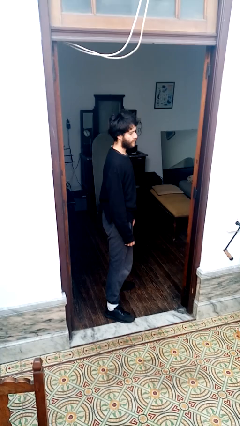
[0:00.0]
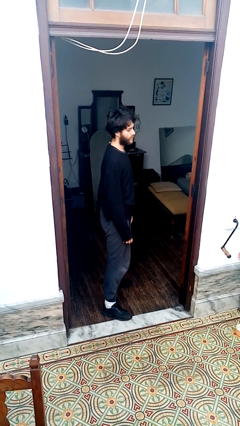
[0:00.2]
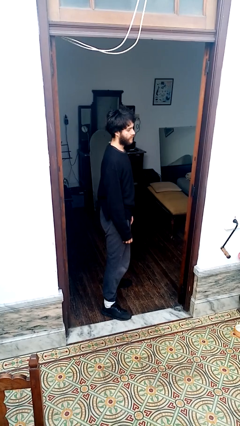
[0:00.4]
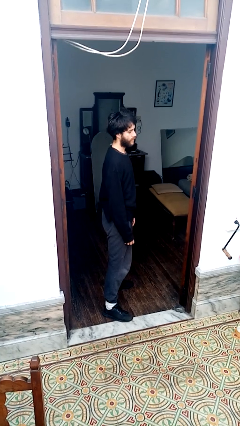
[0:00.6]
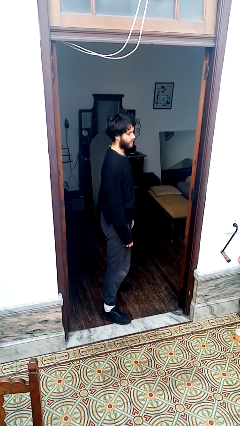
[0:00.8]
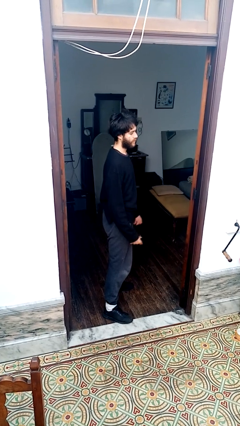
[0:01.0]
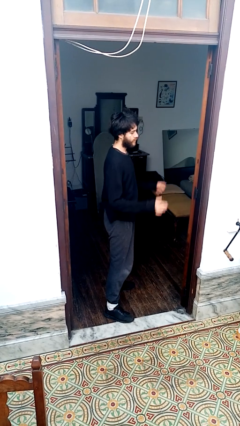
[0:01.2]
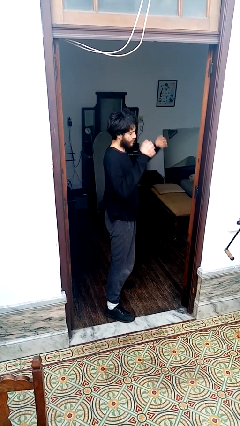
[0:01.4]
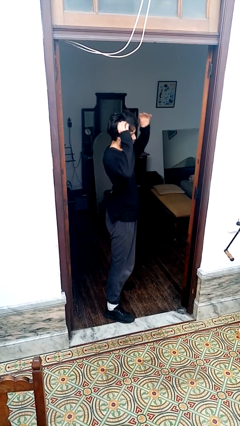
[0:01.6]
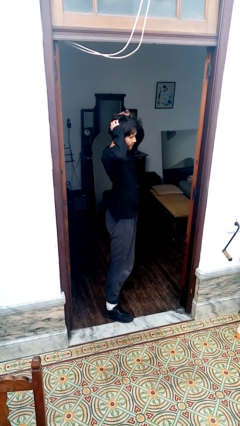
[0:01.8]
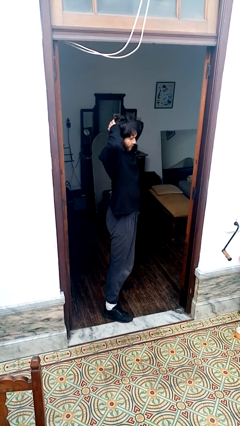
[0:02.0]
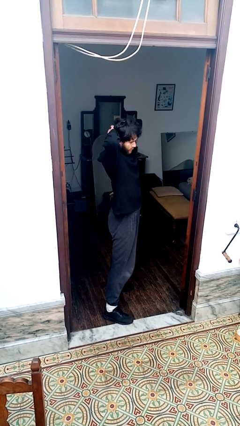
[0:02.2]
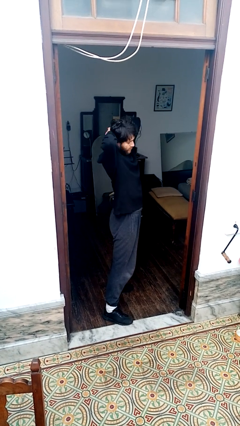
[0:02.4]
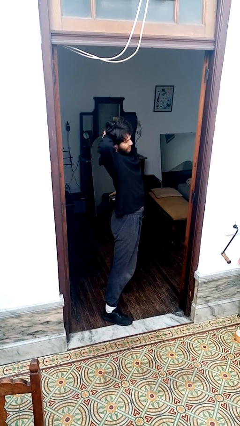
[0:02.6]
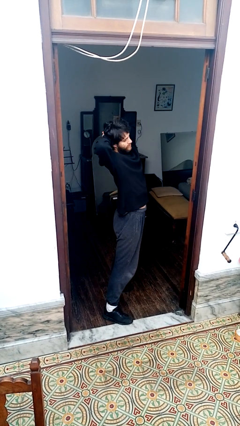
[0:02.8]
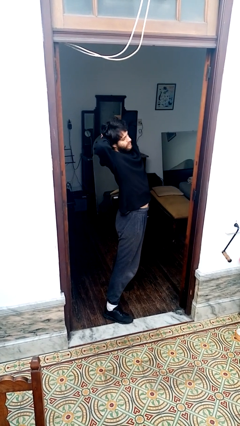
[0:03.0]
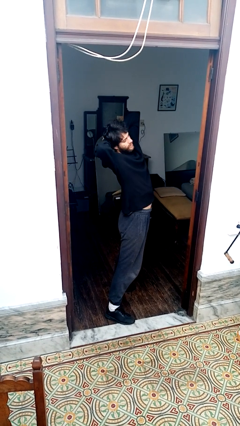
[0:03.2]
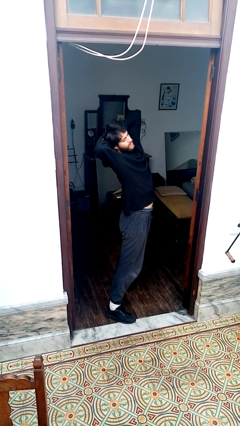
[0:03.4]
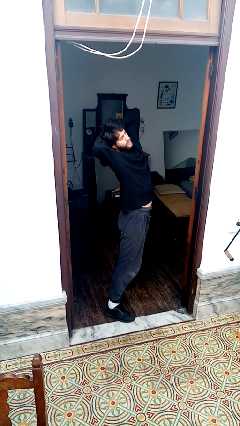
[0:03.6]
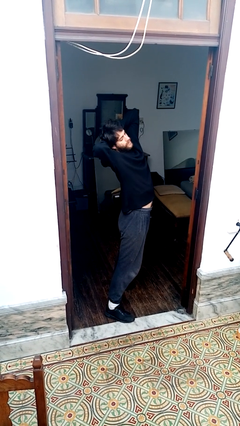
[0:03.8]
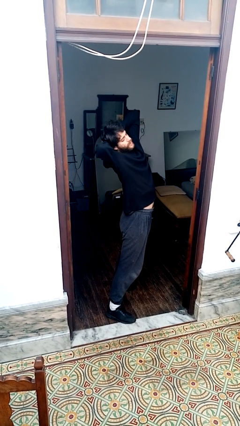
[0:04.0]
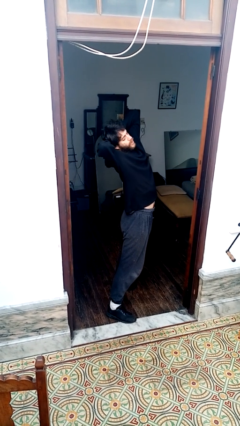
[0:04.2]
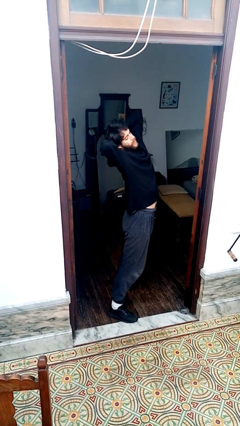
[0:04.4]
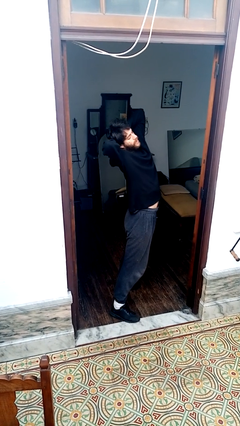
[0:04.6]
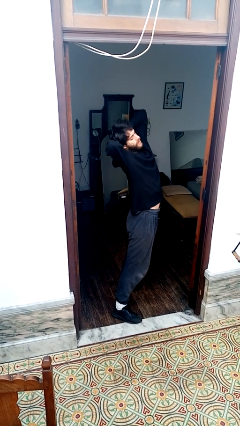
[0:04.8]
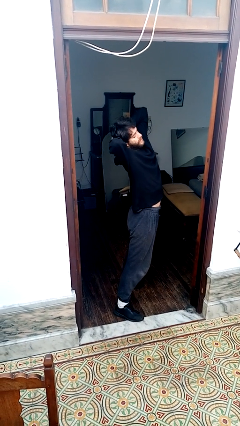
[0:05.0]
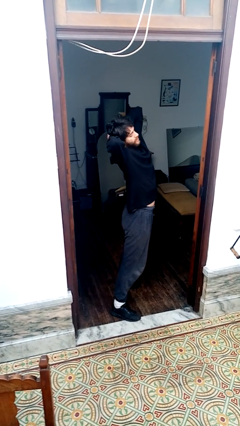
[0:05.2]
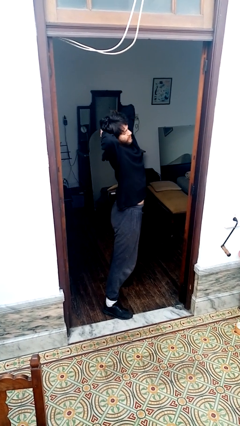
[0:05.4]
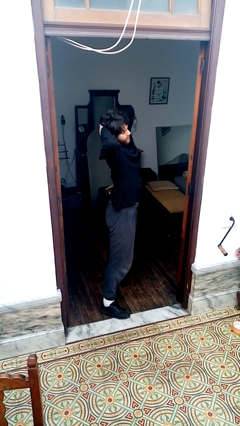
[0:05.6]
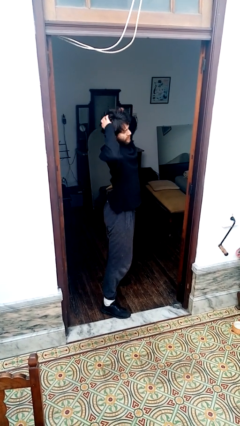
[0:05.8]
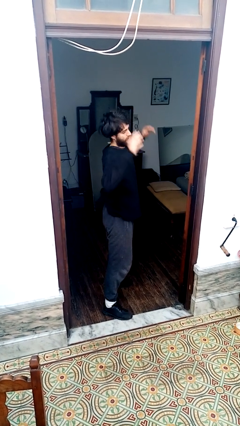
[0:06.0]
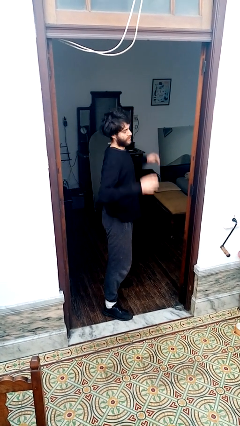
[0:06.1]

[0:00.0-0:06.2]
person stretches arms over head

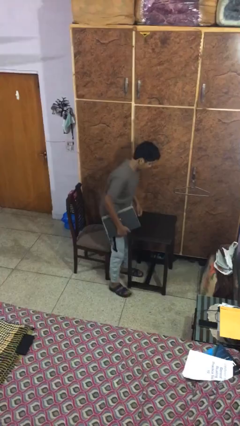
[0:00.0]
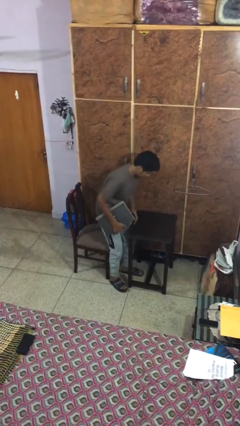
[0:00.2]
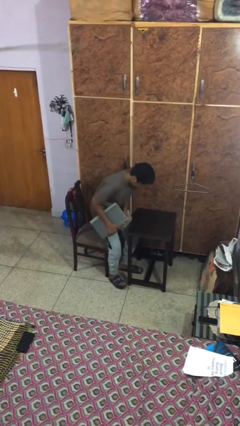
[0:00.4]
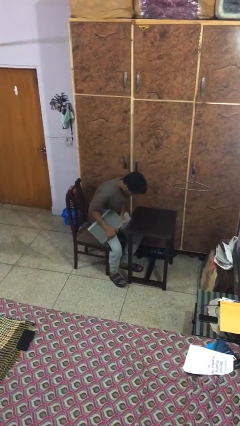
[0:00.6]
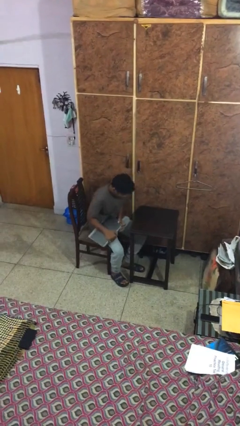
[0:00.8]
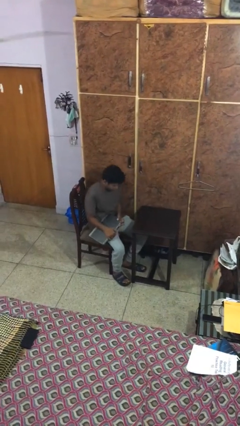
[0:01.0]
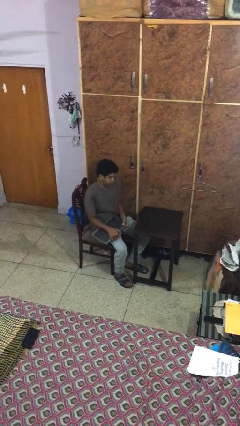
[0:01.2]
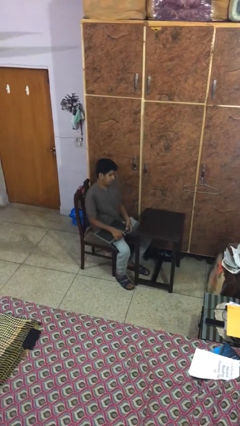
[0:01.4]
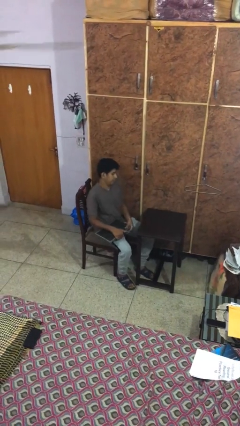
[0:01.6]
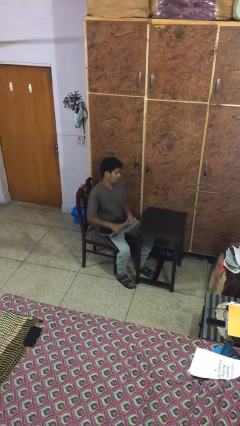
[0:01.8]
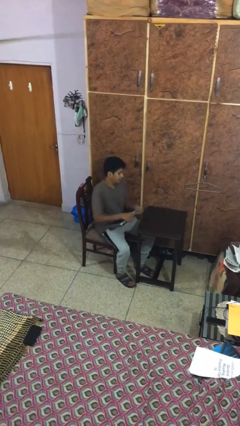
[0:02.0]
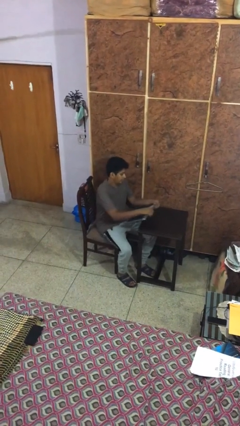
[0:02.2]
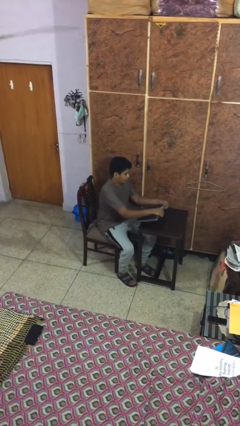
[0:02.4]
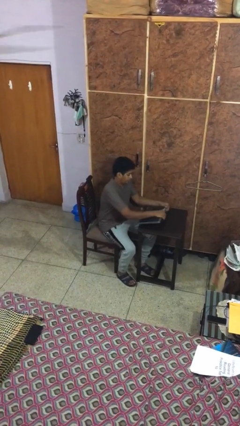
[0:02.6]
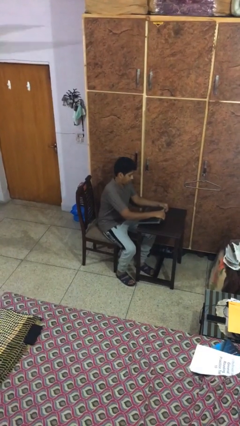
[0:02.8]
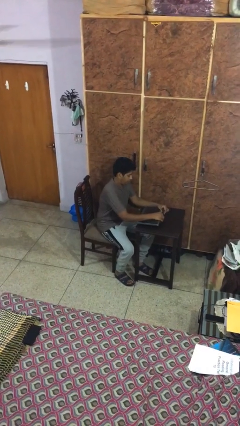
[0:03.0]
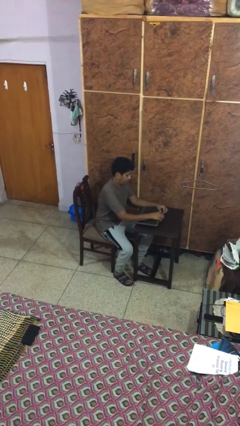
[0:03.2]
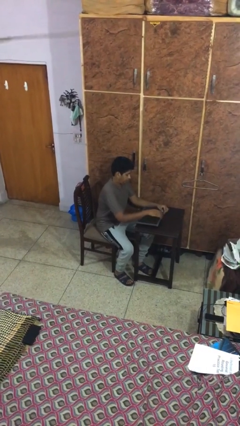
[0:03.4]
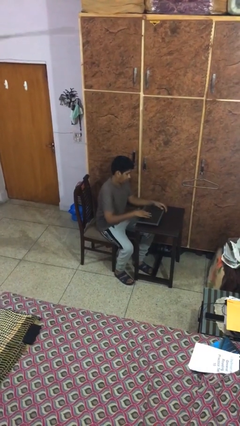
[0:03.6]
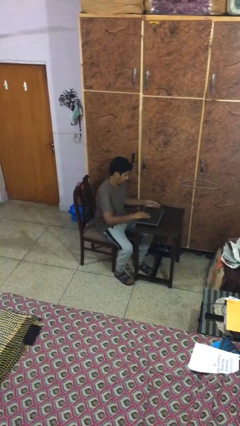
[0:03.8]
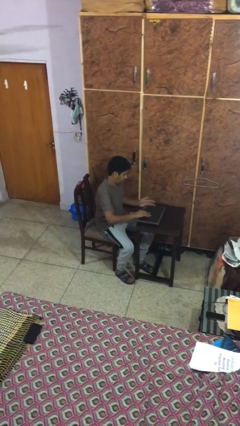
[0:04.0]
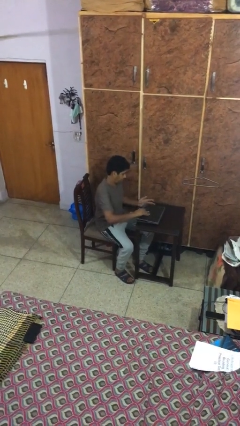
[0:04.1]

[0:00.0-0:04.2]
person sits down

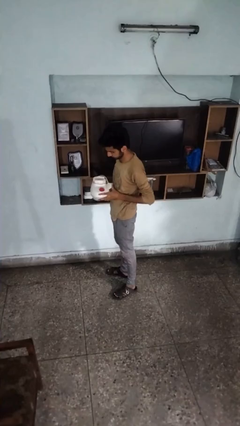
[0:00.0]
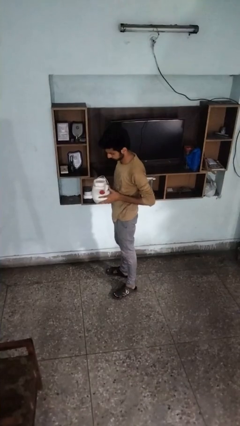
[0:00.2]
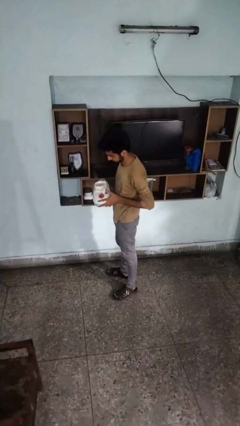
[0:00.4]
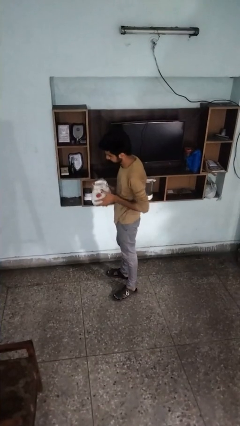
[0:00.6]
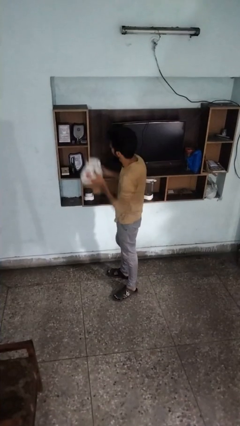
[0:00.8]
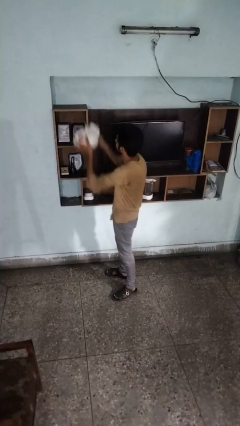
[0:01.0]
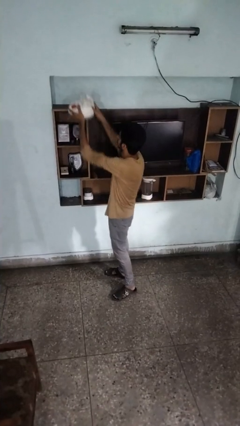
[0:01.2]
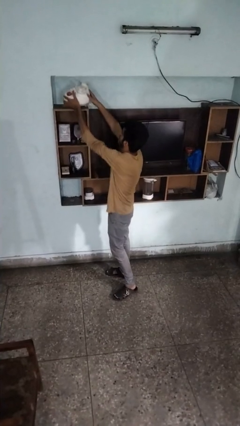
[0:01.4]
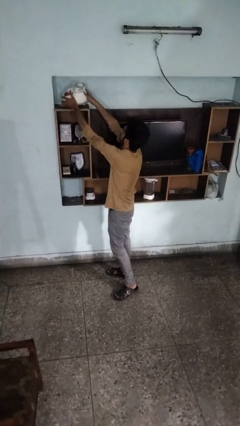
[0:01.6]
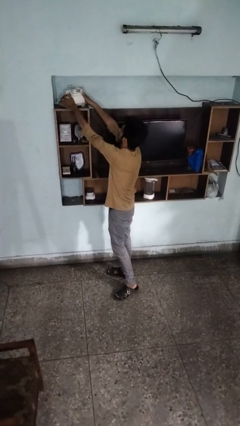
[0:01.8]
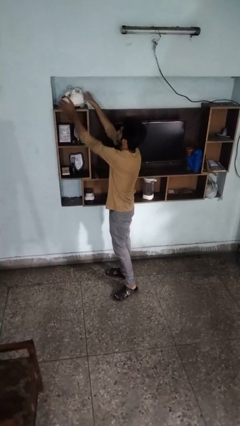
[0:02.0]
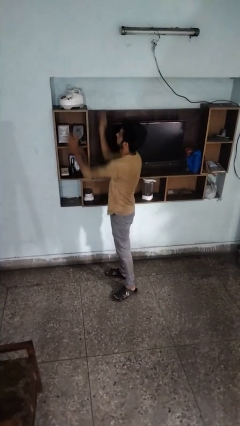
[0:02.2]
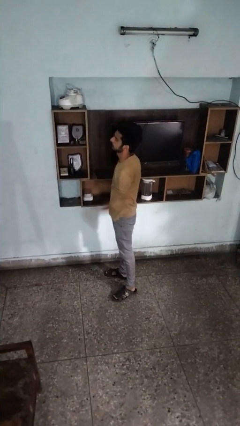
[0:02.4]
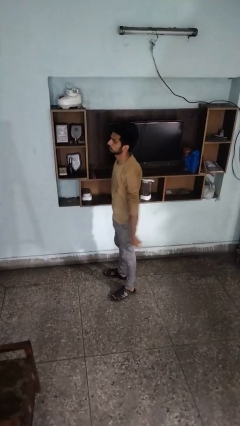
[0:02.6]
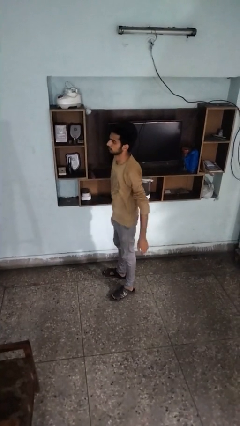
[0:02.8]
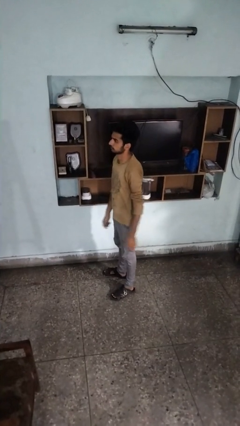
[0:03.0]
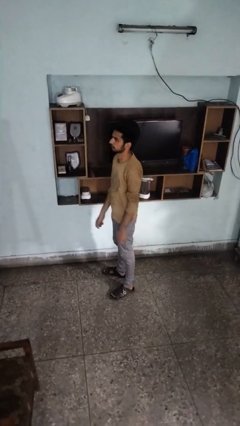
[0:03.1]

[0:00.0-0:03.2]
person puts down object on shelf

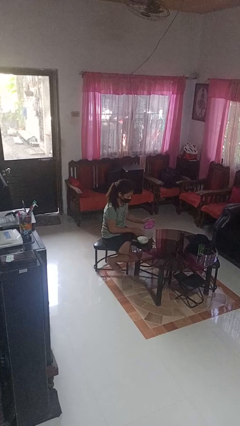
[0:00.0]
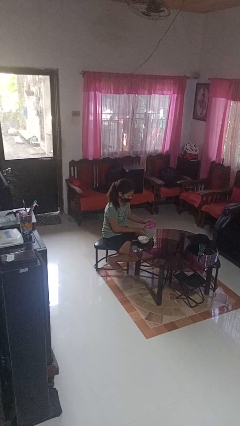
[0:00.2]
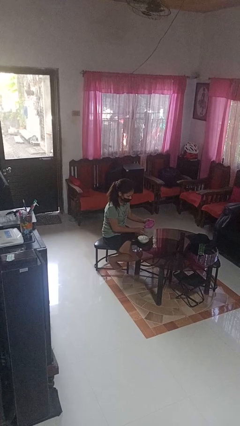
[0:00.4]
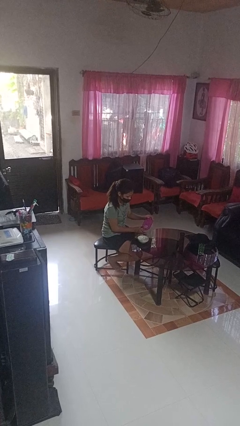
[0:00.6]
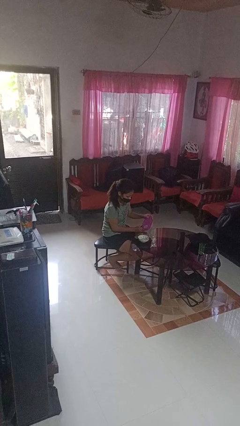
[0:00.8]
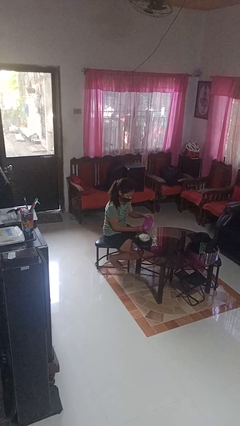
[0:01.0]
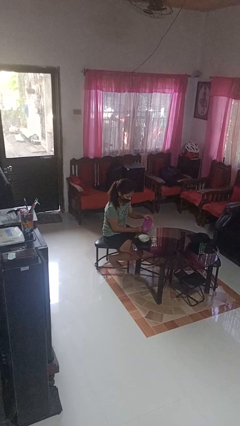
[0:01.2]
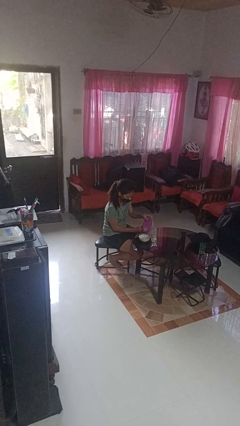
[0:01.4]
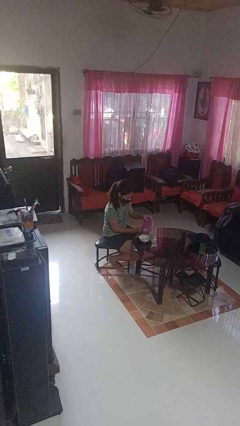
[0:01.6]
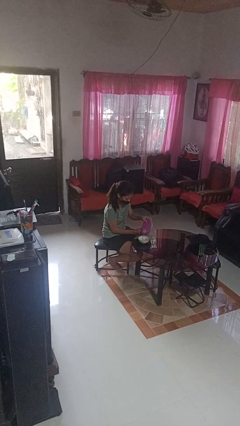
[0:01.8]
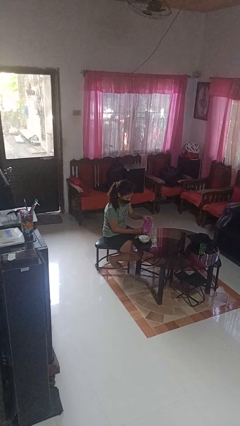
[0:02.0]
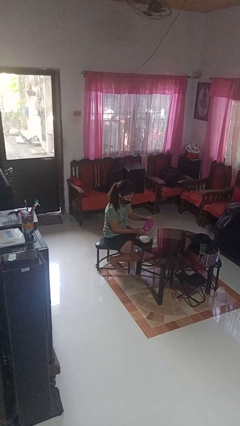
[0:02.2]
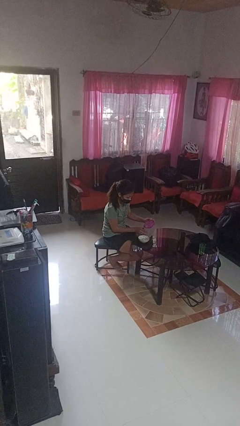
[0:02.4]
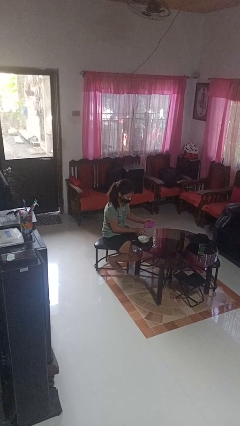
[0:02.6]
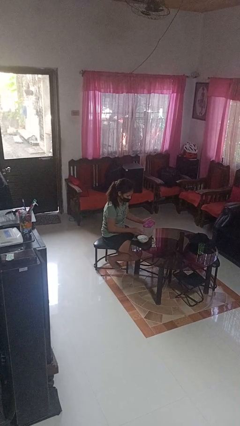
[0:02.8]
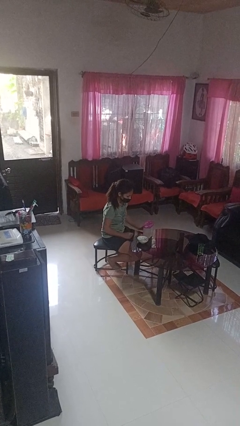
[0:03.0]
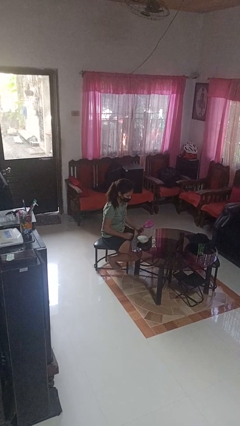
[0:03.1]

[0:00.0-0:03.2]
person pours into bowl

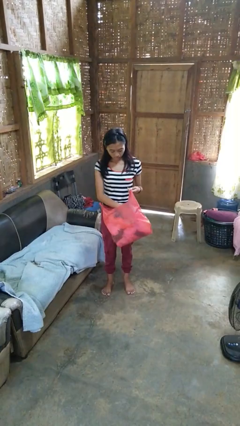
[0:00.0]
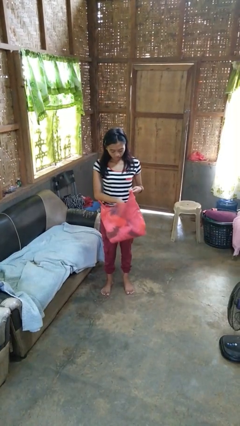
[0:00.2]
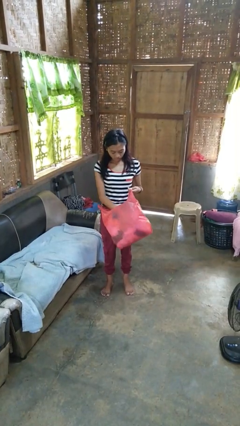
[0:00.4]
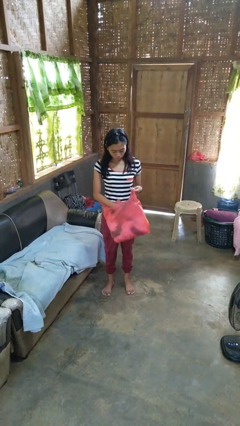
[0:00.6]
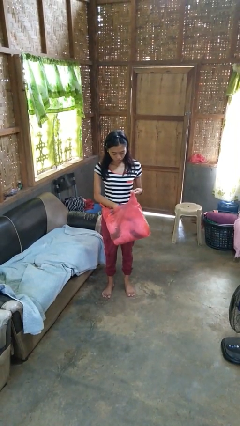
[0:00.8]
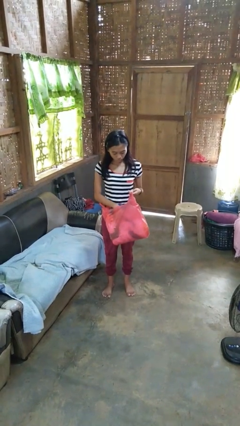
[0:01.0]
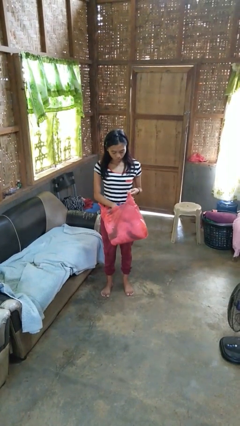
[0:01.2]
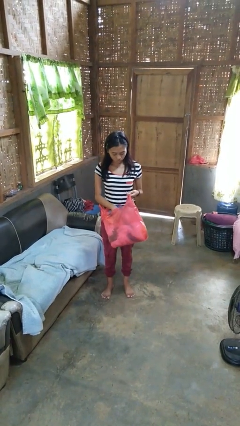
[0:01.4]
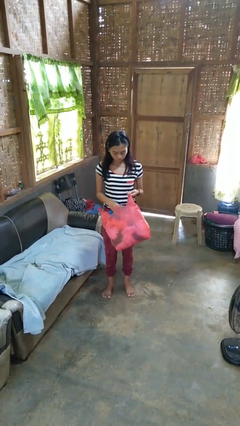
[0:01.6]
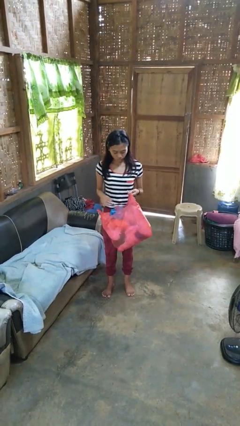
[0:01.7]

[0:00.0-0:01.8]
person searches in bag
